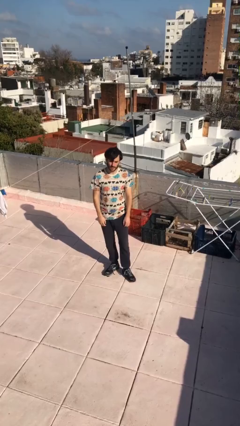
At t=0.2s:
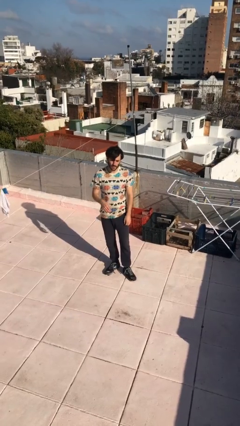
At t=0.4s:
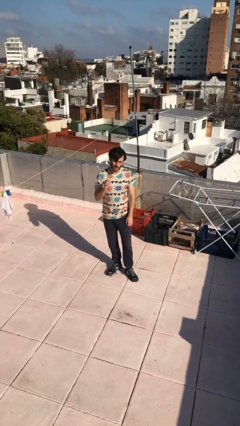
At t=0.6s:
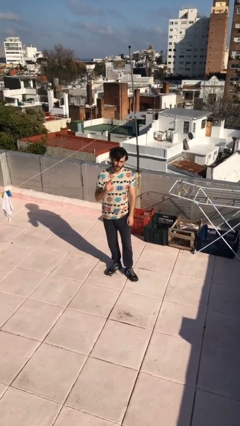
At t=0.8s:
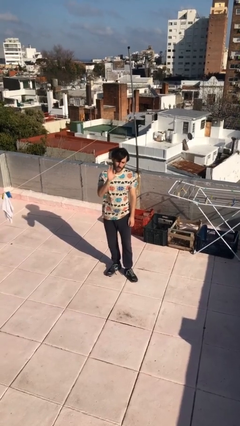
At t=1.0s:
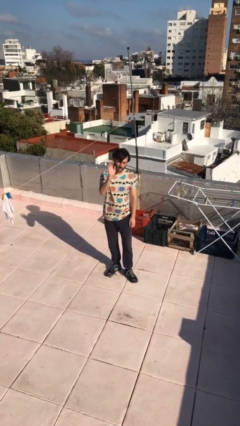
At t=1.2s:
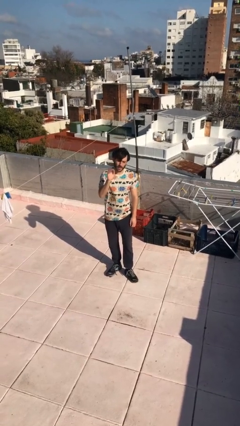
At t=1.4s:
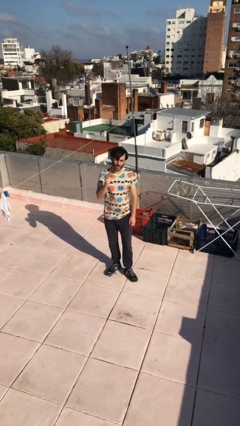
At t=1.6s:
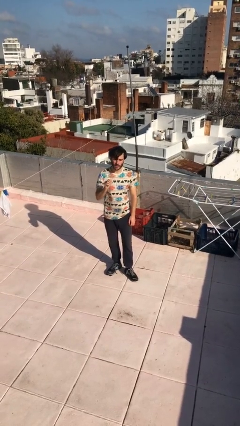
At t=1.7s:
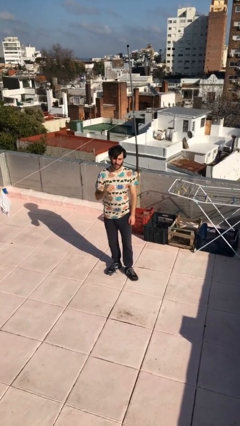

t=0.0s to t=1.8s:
person gestures swipe up

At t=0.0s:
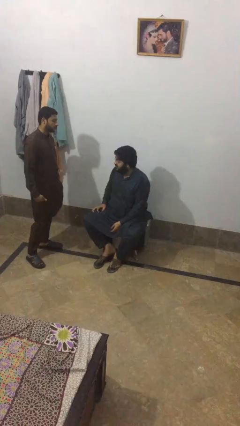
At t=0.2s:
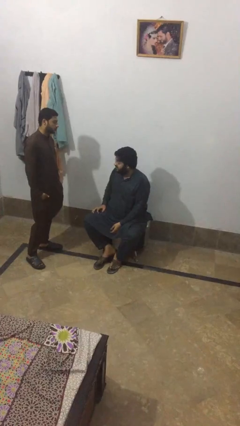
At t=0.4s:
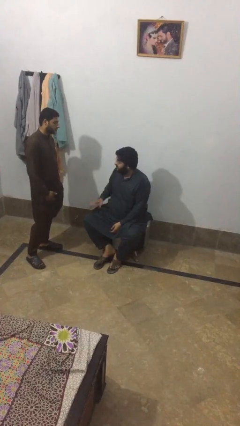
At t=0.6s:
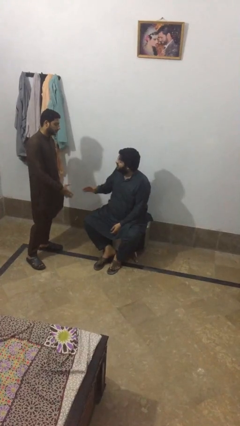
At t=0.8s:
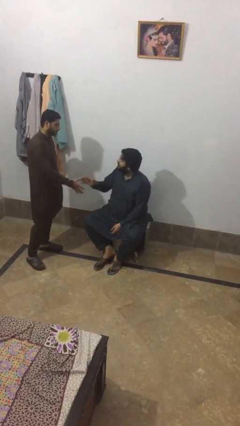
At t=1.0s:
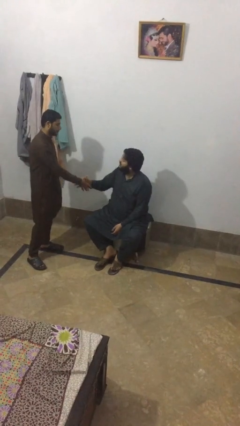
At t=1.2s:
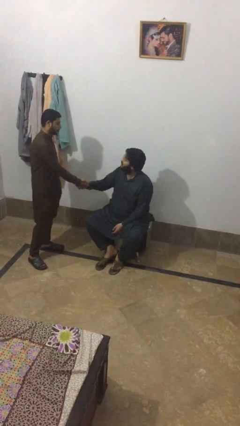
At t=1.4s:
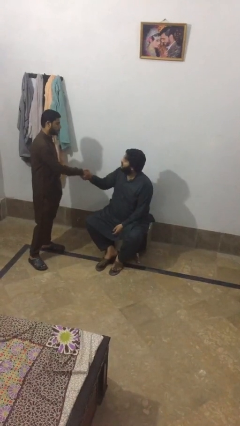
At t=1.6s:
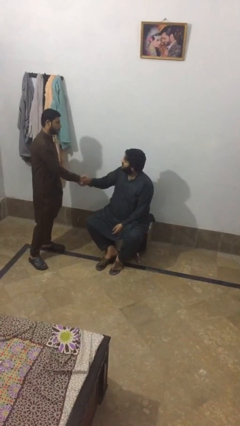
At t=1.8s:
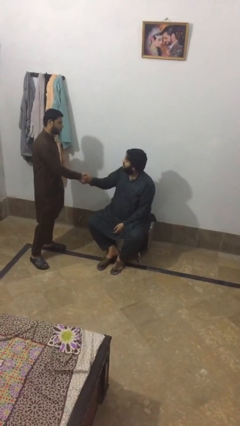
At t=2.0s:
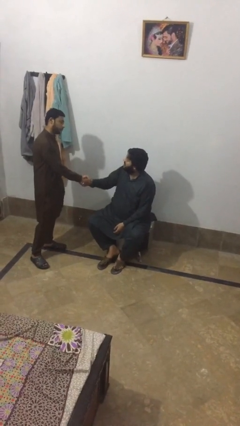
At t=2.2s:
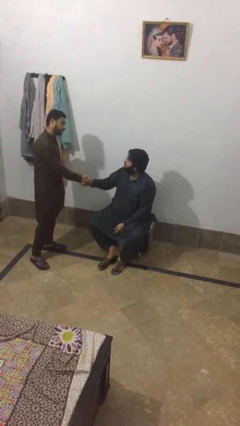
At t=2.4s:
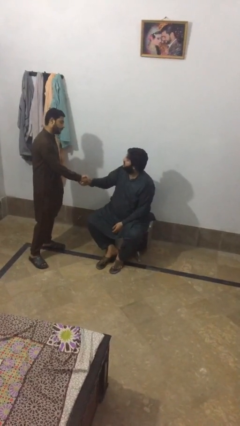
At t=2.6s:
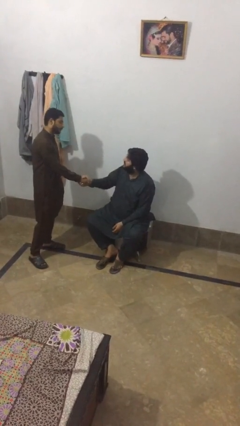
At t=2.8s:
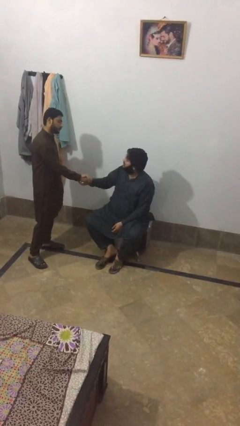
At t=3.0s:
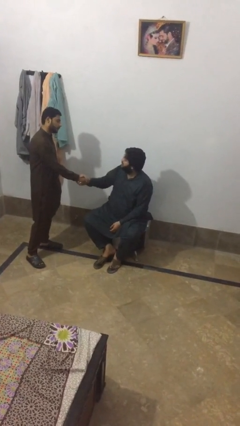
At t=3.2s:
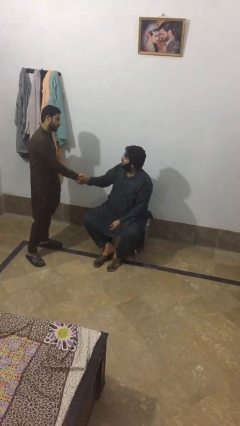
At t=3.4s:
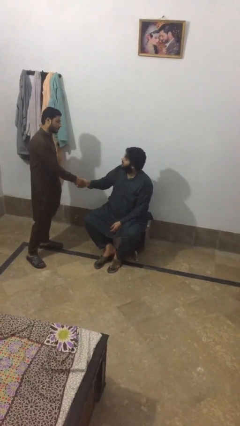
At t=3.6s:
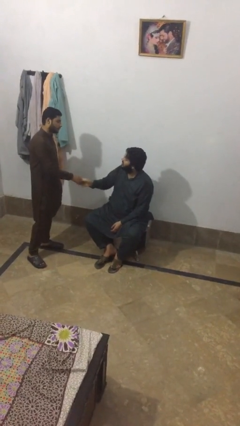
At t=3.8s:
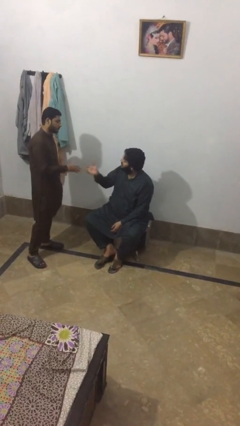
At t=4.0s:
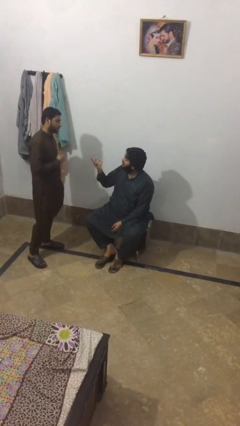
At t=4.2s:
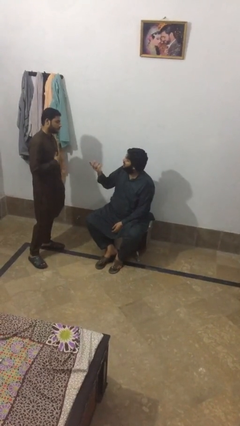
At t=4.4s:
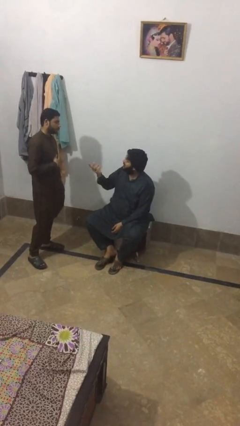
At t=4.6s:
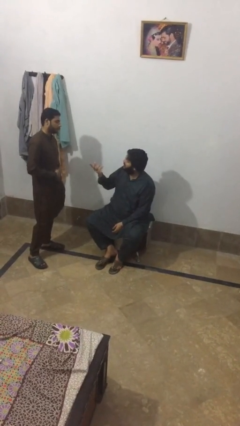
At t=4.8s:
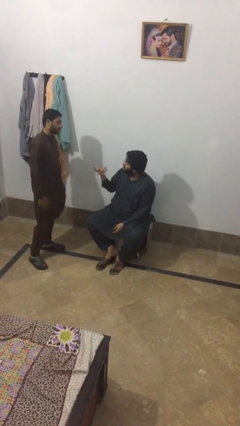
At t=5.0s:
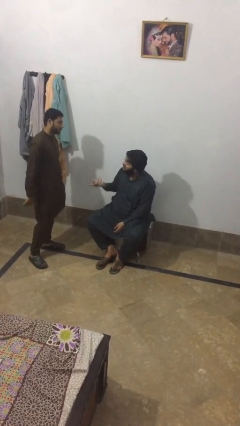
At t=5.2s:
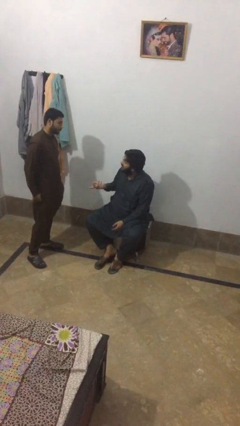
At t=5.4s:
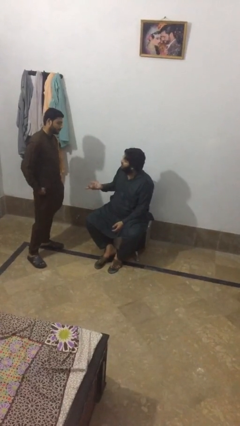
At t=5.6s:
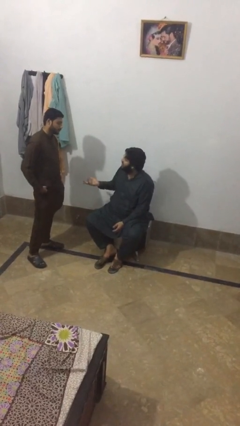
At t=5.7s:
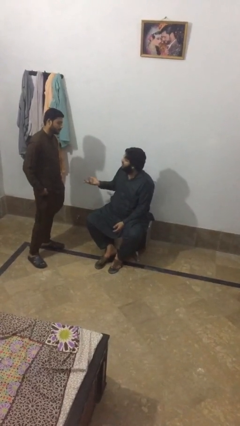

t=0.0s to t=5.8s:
person shakes hand

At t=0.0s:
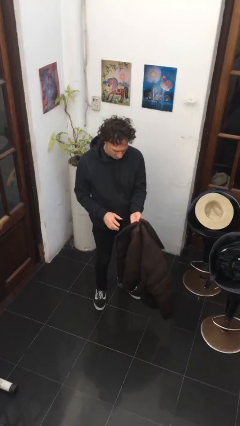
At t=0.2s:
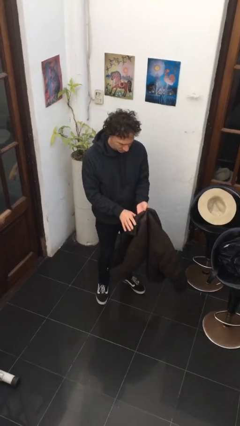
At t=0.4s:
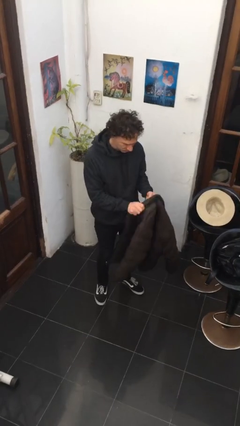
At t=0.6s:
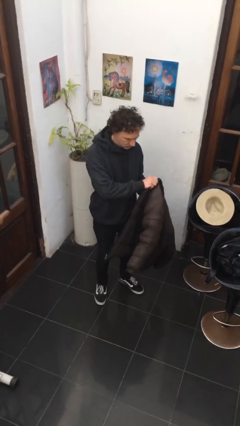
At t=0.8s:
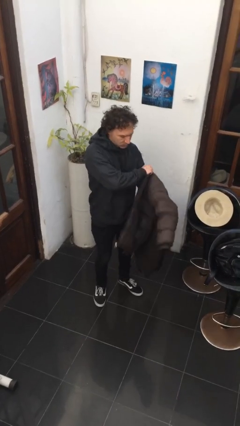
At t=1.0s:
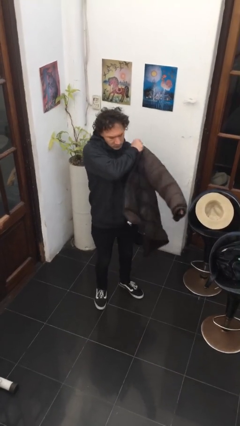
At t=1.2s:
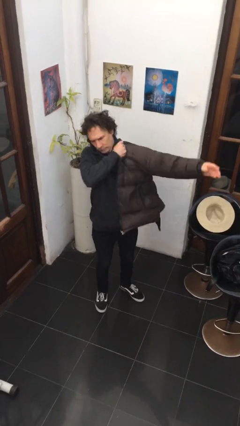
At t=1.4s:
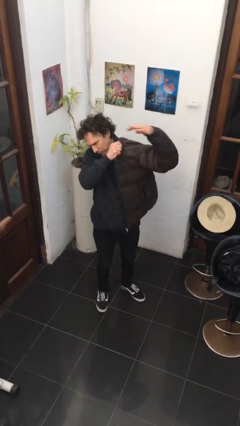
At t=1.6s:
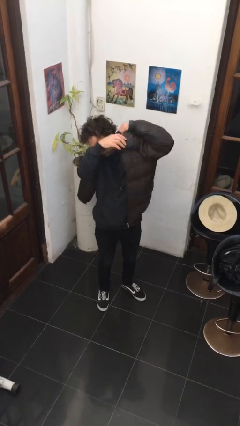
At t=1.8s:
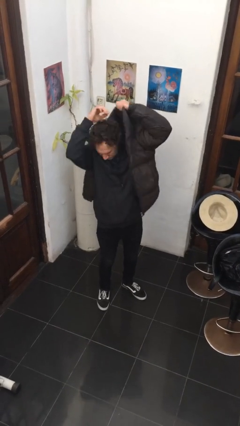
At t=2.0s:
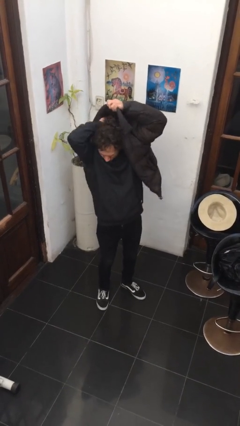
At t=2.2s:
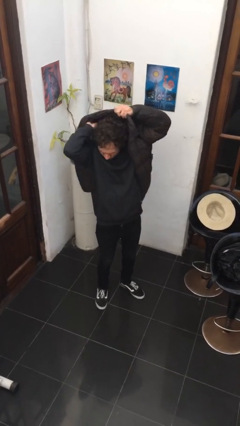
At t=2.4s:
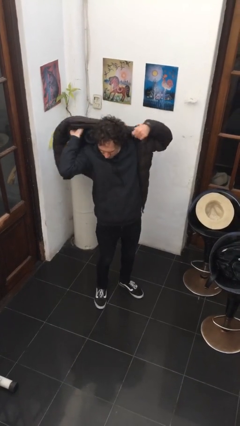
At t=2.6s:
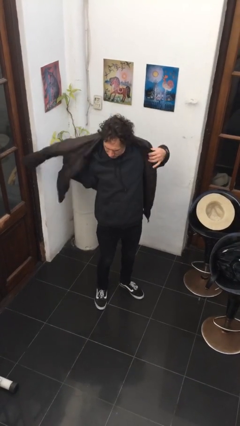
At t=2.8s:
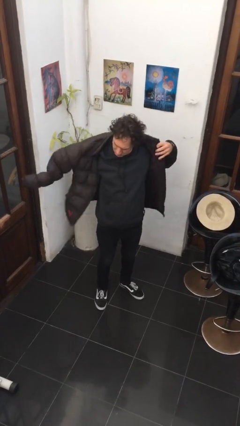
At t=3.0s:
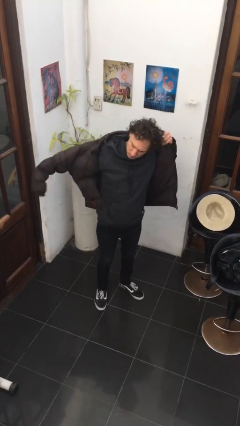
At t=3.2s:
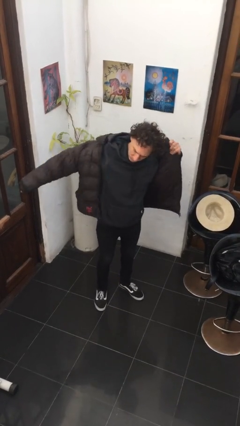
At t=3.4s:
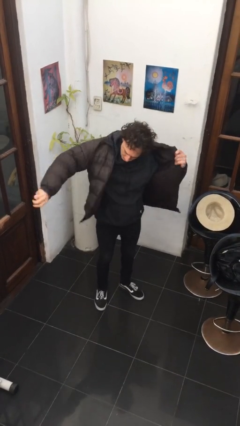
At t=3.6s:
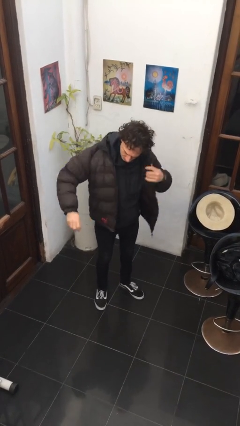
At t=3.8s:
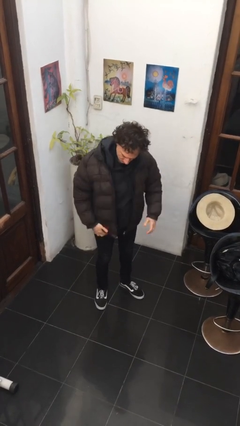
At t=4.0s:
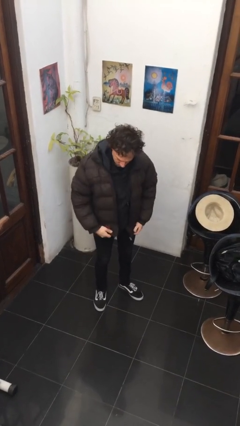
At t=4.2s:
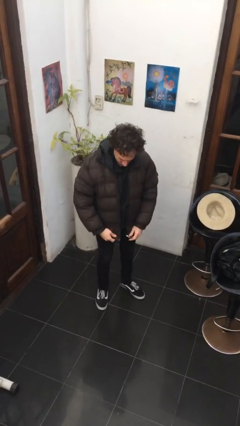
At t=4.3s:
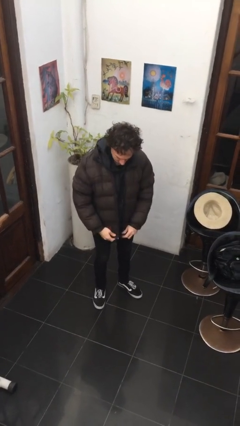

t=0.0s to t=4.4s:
person puts on jacket

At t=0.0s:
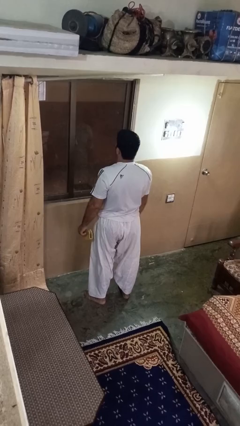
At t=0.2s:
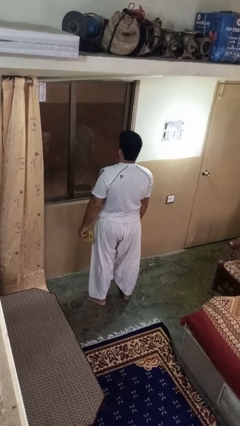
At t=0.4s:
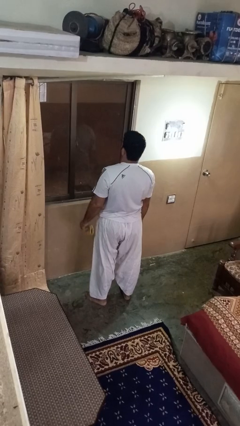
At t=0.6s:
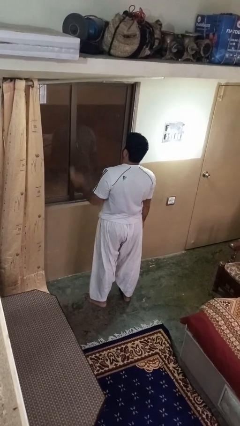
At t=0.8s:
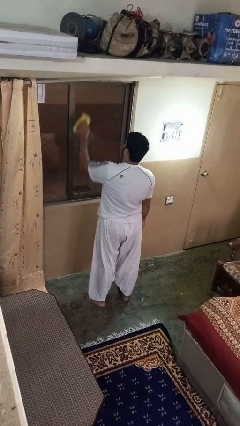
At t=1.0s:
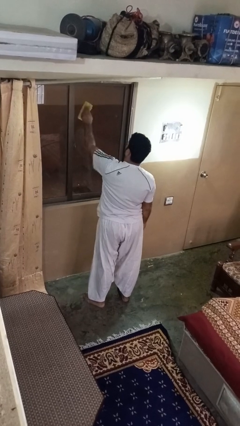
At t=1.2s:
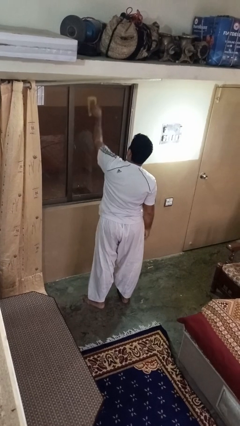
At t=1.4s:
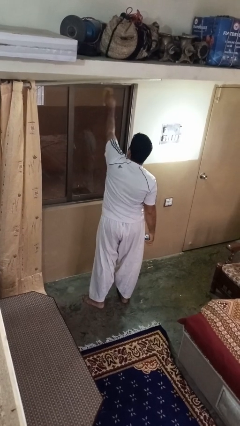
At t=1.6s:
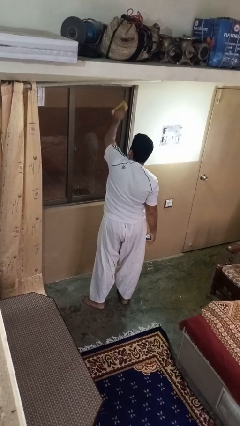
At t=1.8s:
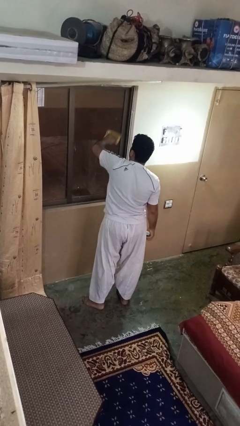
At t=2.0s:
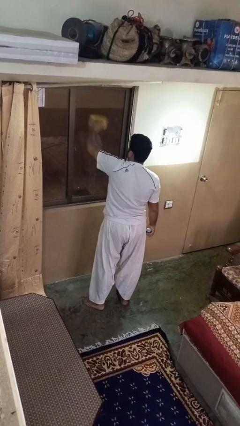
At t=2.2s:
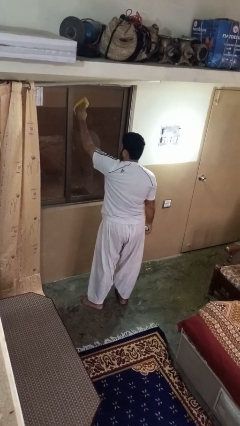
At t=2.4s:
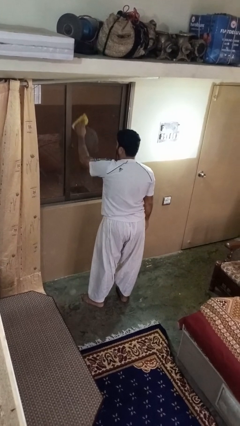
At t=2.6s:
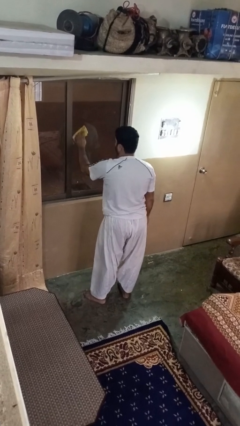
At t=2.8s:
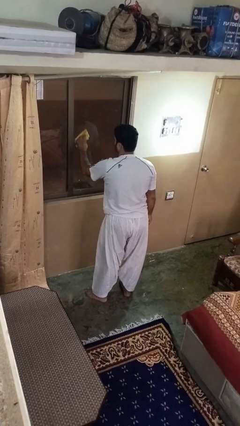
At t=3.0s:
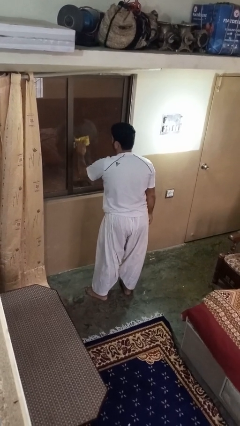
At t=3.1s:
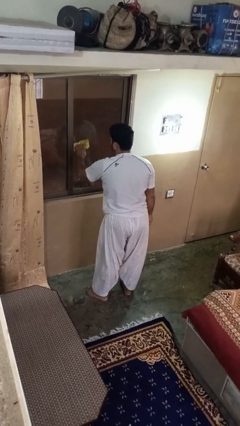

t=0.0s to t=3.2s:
person washes window

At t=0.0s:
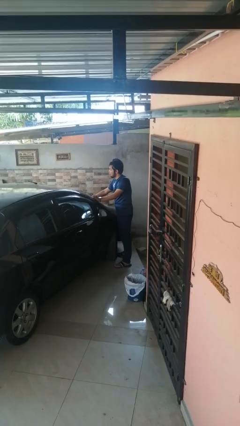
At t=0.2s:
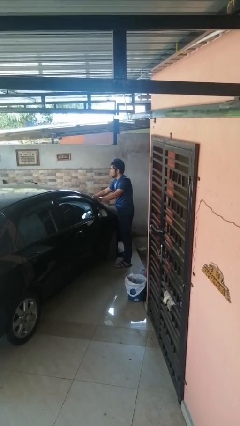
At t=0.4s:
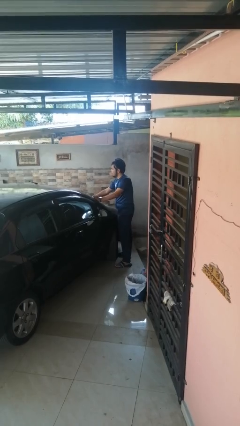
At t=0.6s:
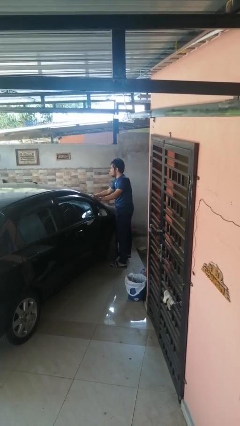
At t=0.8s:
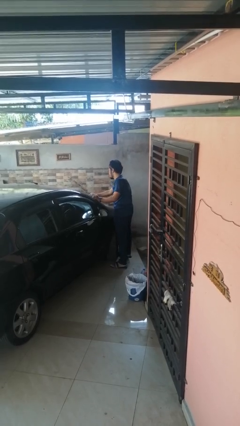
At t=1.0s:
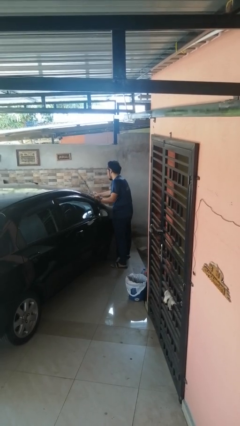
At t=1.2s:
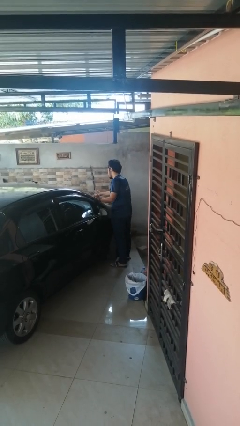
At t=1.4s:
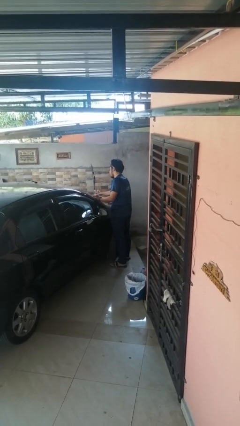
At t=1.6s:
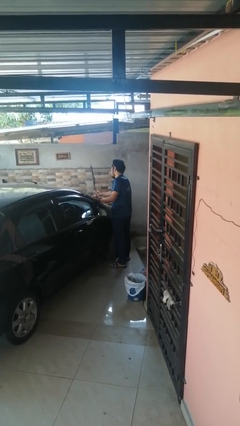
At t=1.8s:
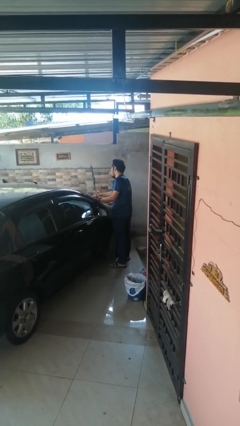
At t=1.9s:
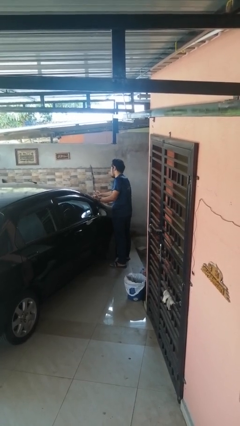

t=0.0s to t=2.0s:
person flips up car wipers

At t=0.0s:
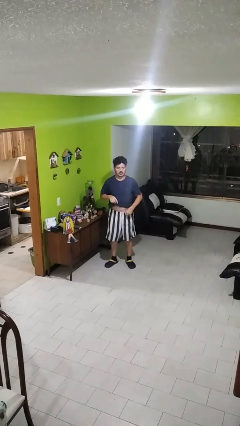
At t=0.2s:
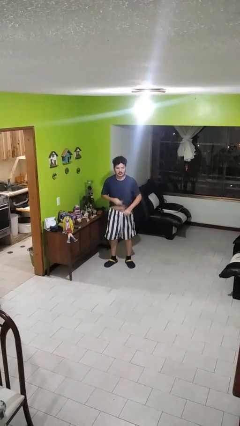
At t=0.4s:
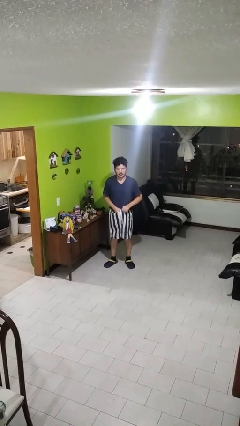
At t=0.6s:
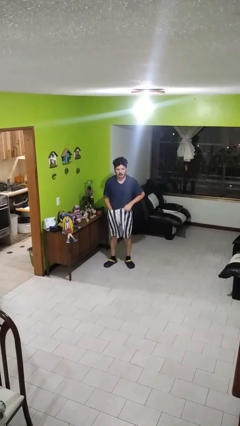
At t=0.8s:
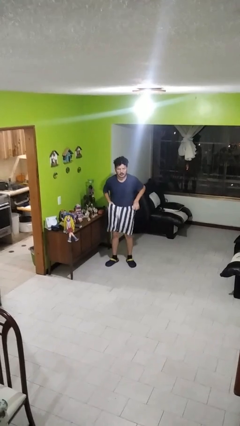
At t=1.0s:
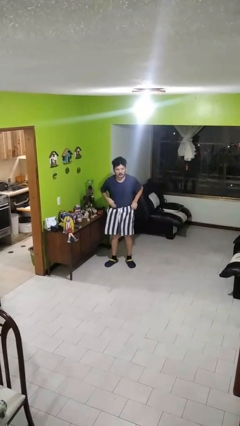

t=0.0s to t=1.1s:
person tucks in shirt
